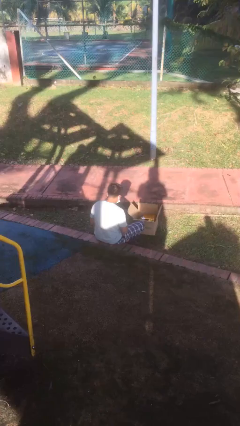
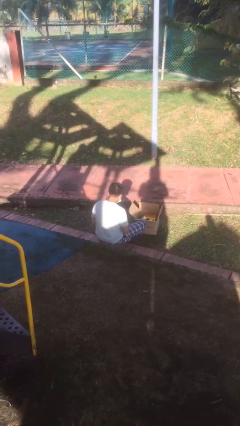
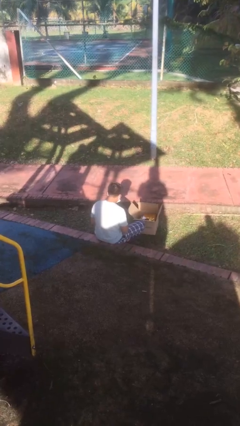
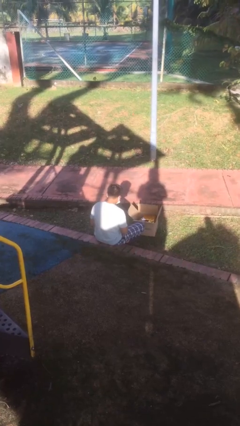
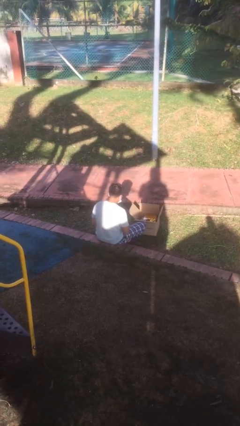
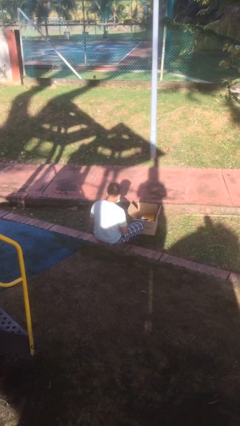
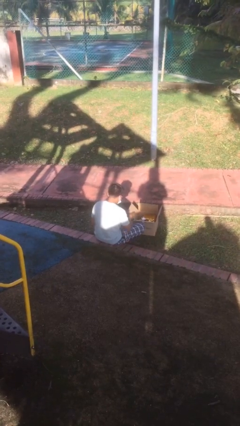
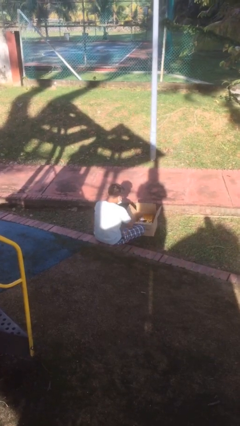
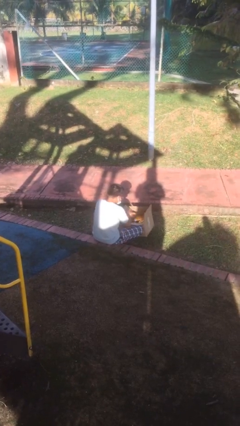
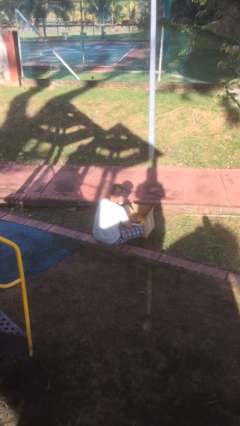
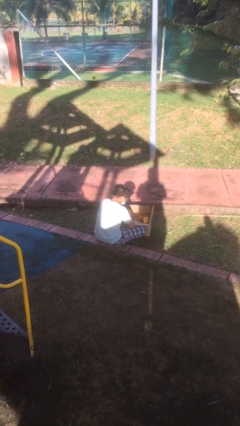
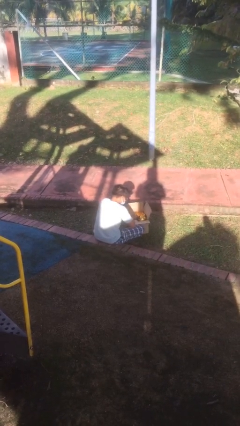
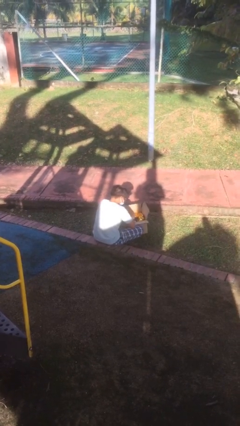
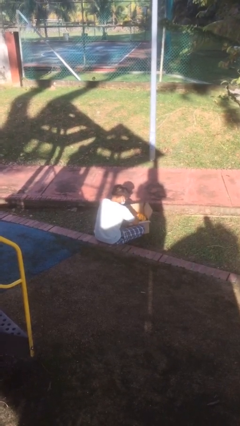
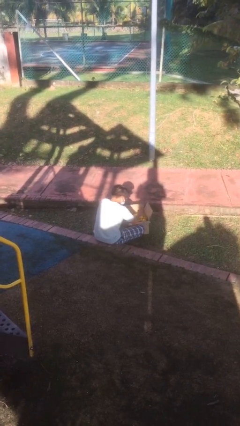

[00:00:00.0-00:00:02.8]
person searches in box

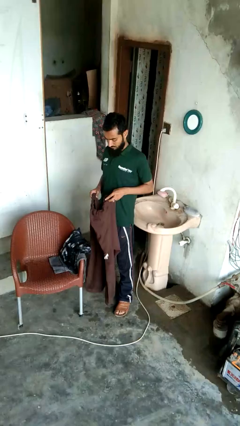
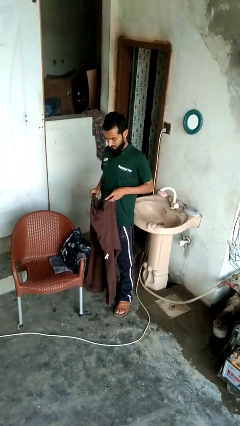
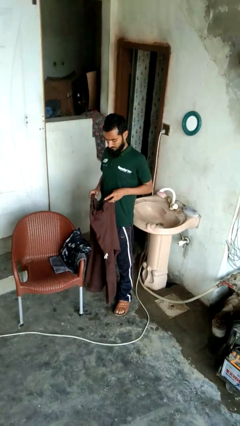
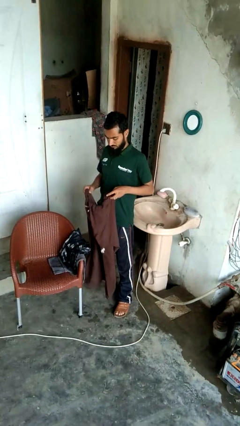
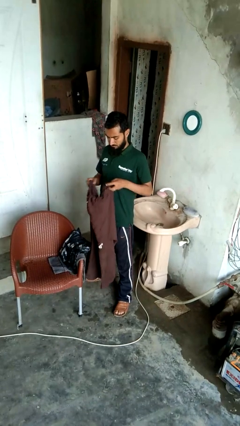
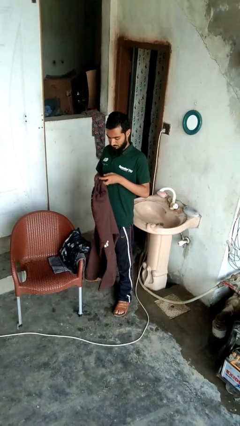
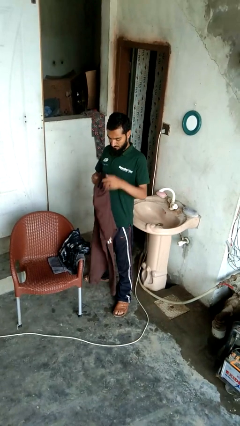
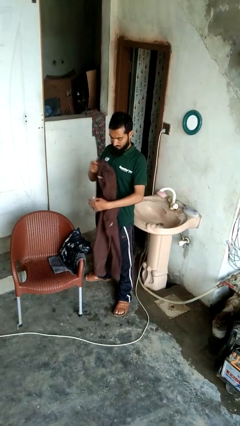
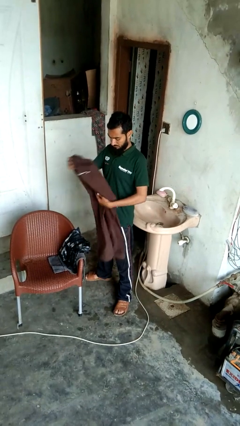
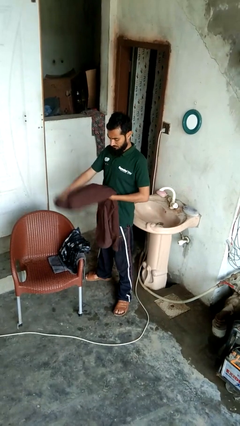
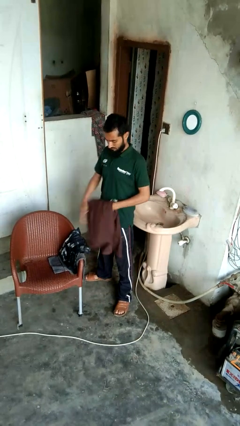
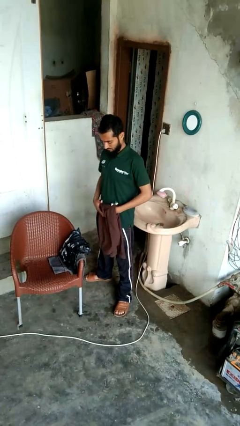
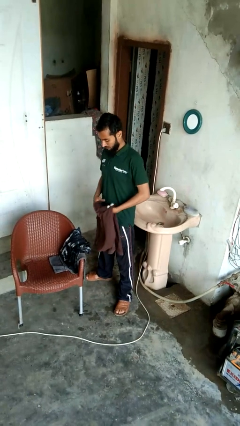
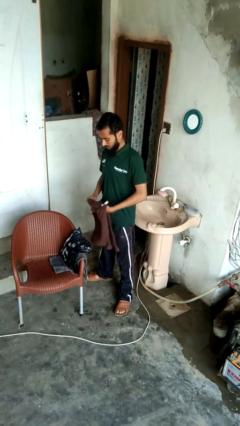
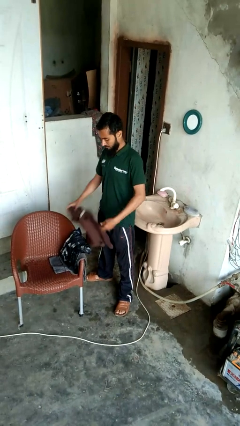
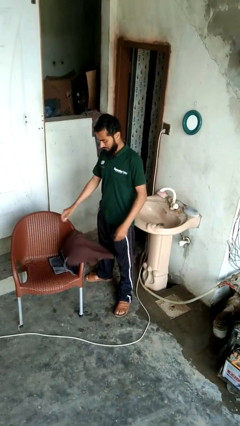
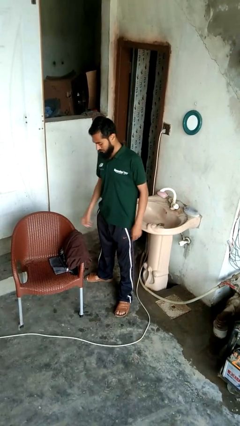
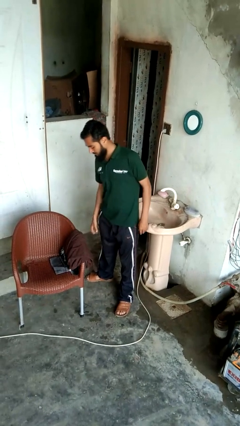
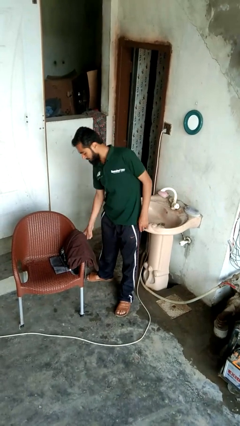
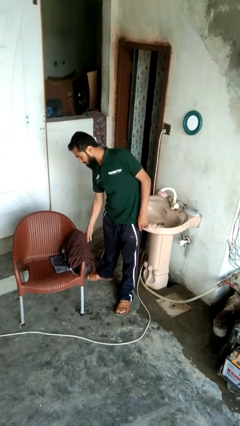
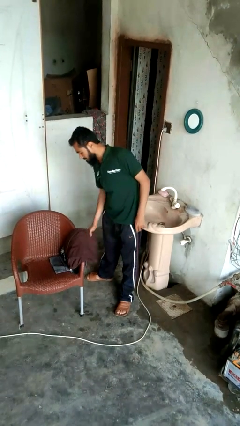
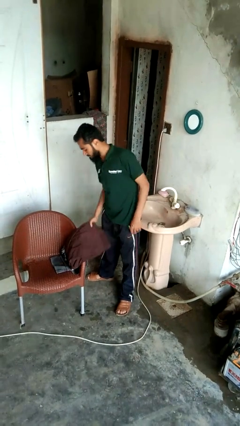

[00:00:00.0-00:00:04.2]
person folds pants

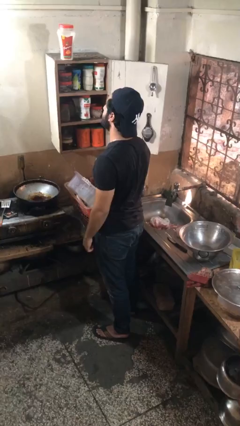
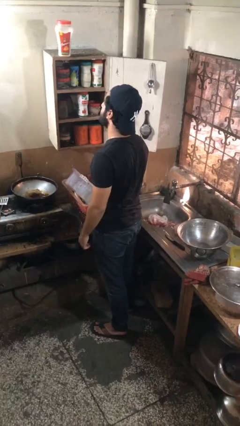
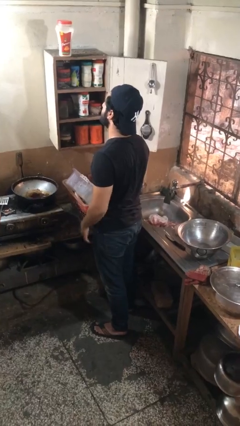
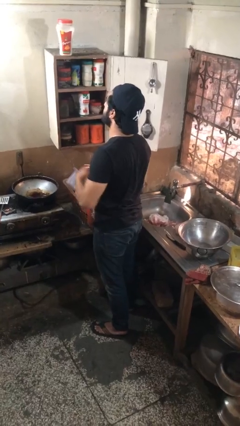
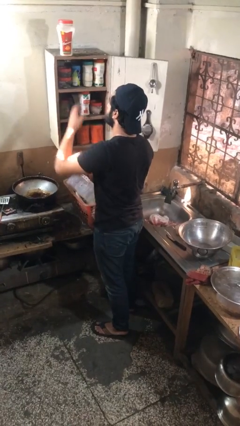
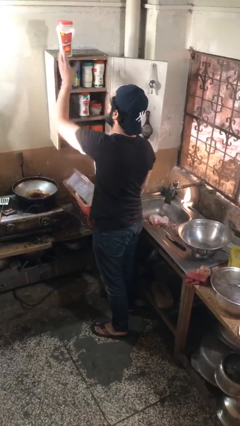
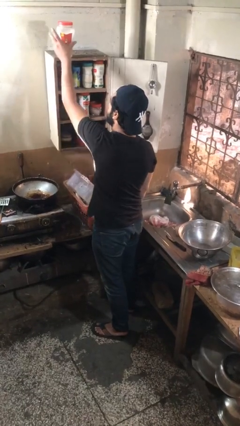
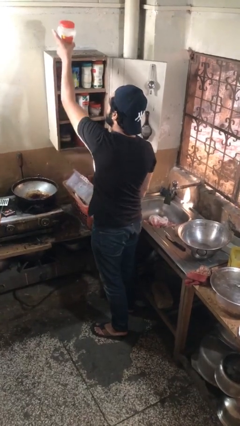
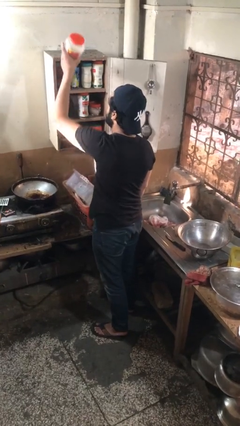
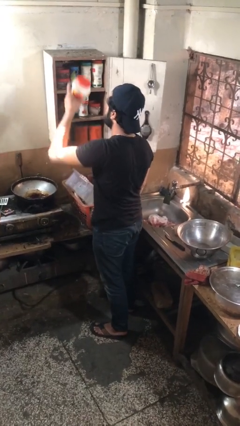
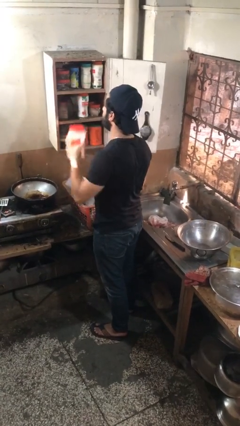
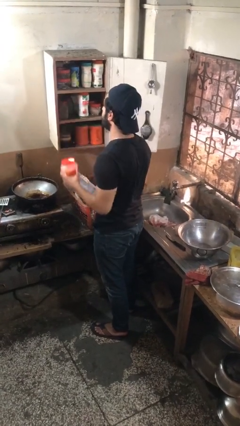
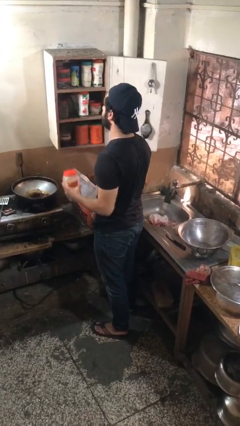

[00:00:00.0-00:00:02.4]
person takes object from cabinet

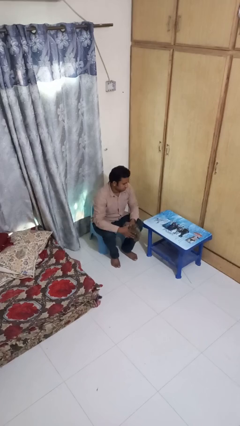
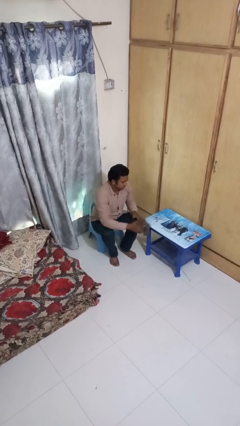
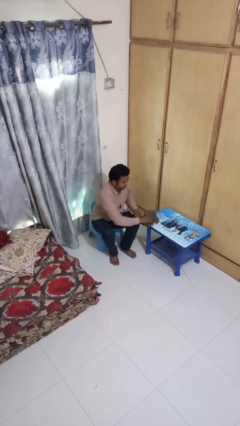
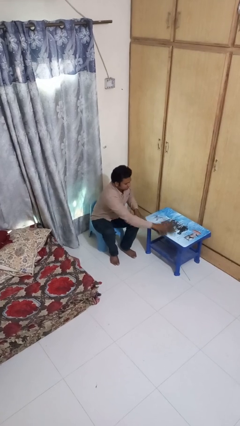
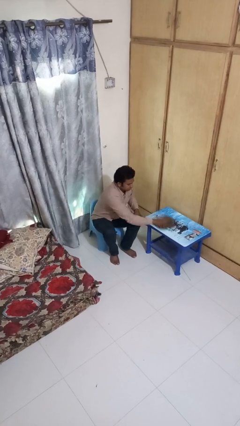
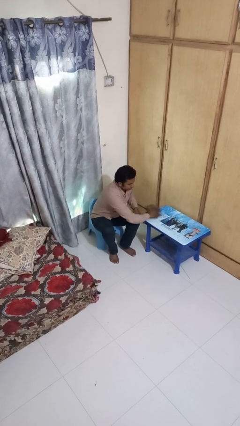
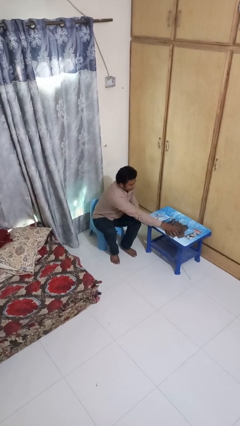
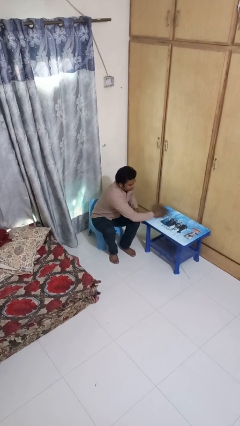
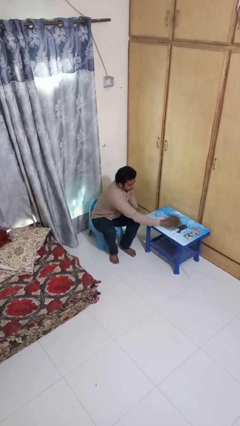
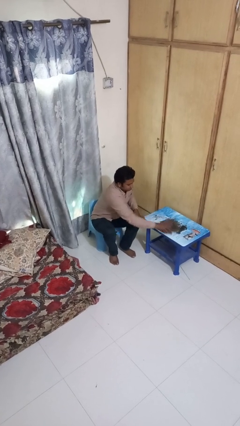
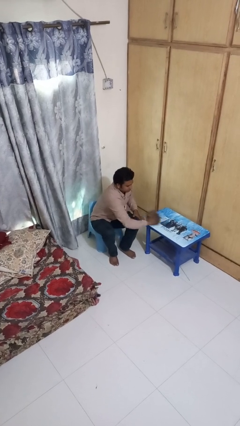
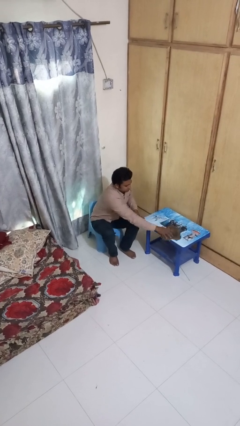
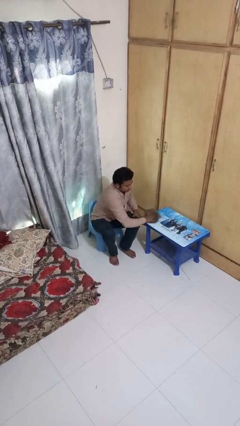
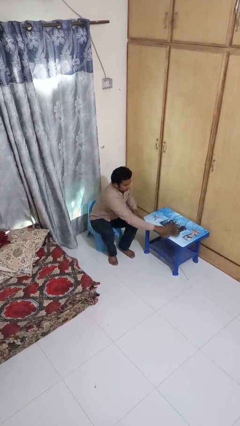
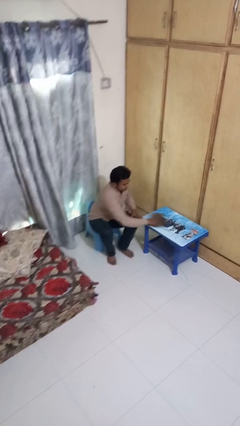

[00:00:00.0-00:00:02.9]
person cleans table with rag

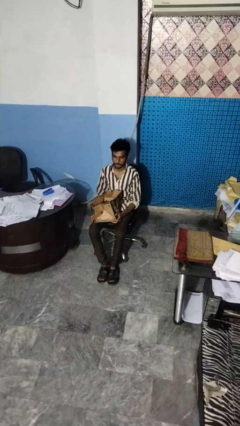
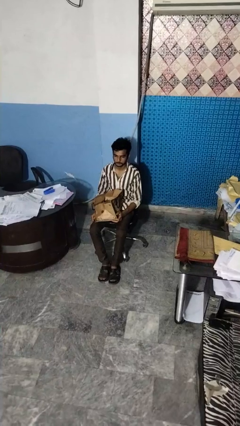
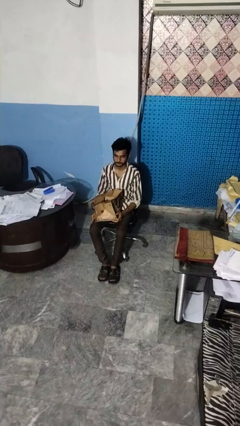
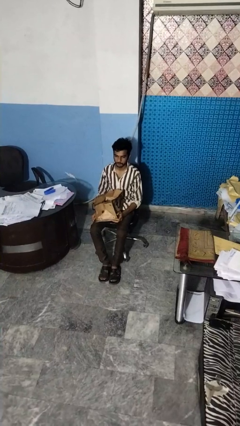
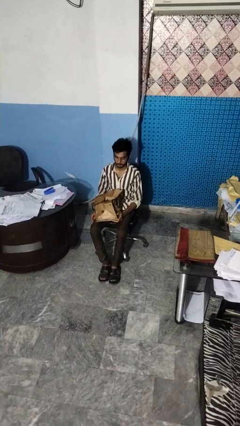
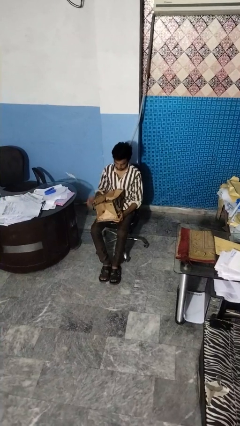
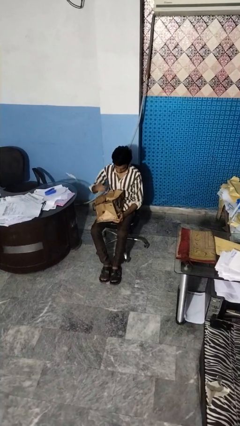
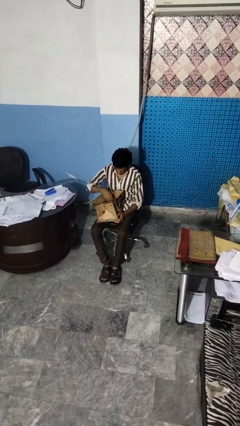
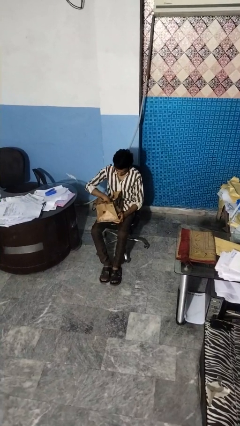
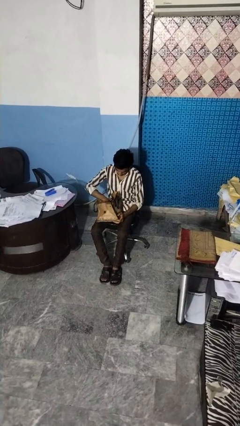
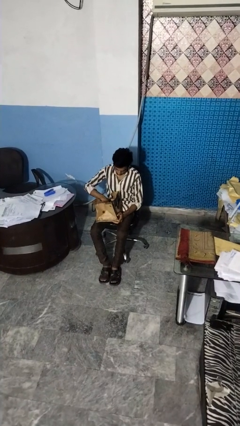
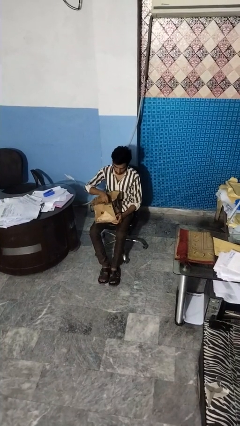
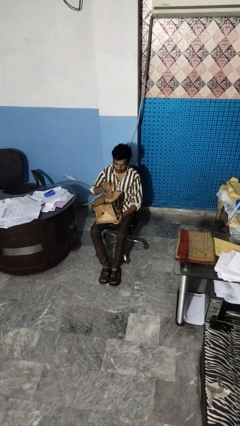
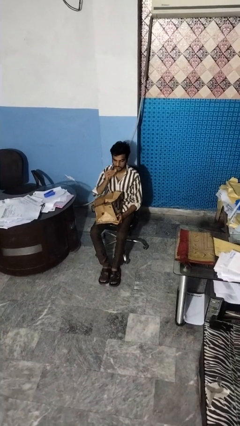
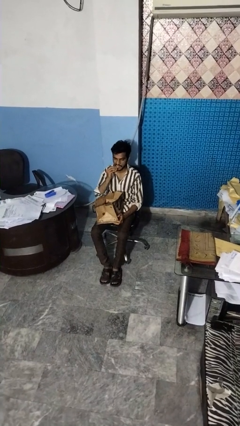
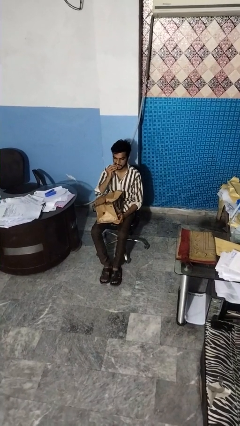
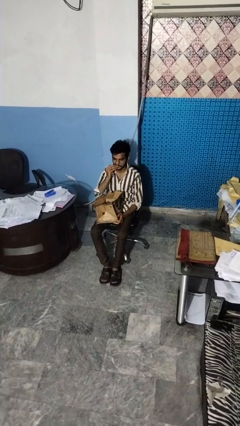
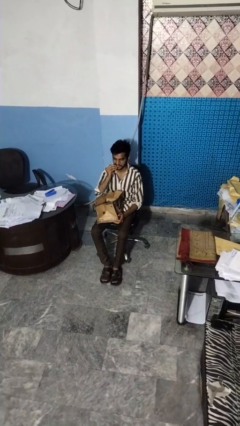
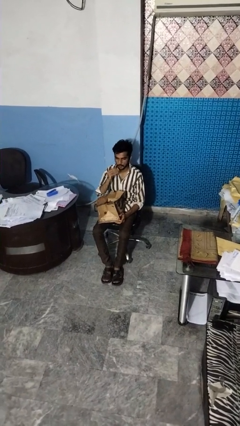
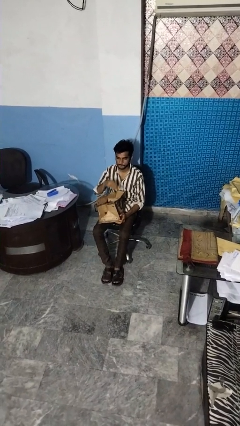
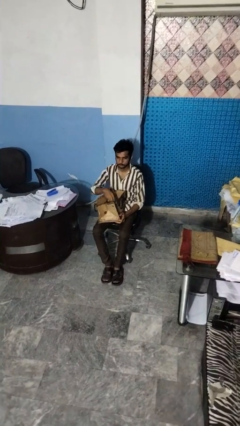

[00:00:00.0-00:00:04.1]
person eats snack from bag

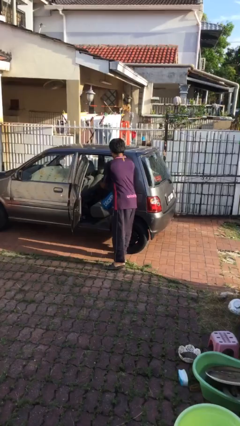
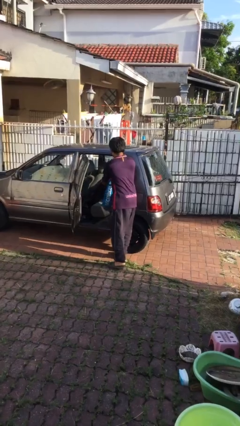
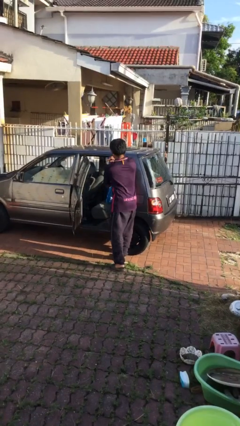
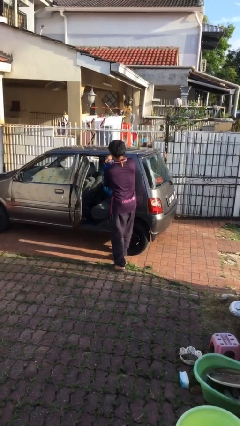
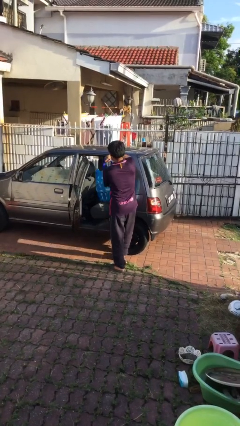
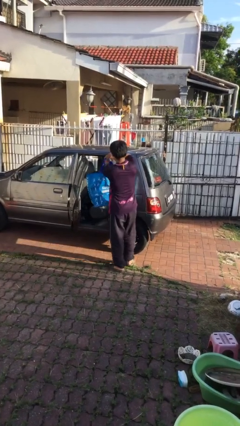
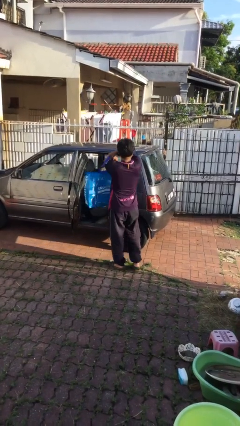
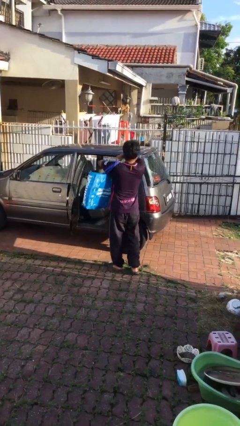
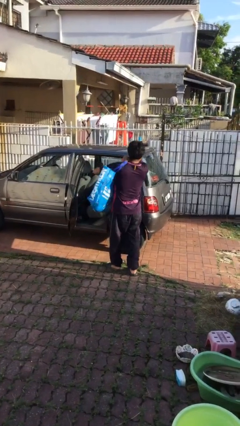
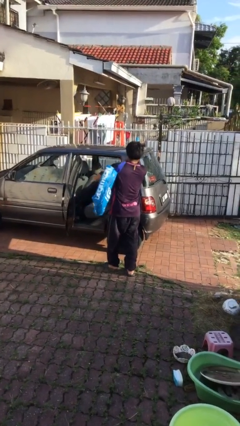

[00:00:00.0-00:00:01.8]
person unloads car
